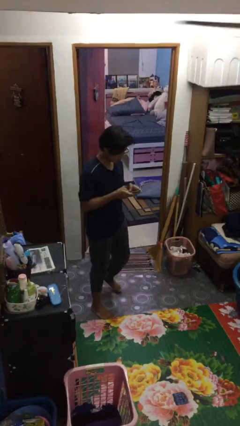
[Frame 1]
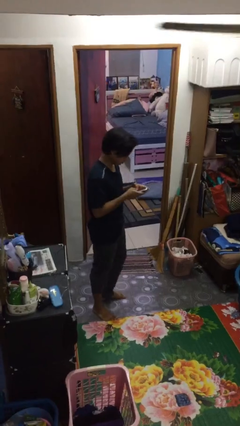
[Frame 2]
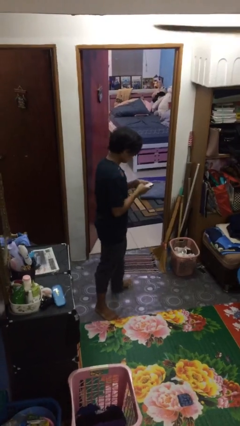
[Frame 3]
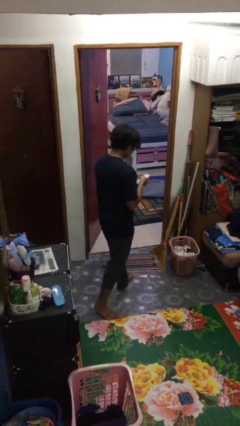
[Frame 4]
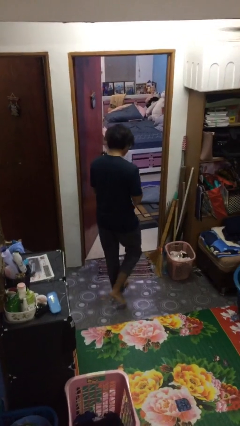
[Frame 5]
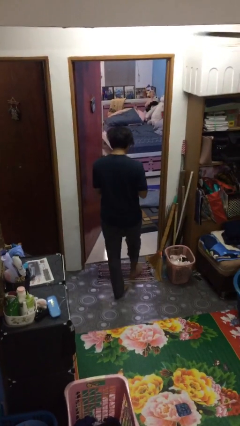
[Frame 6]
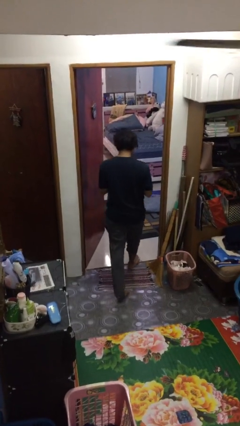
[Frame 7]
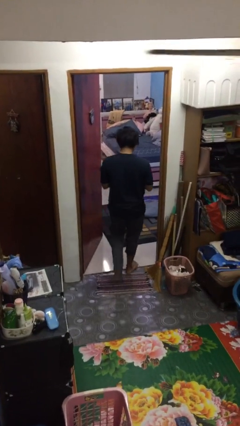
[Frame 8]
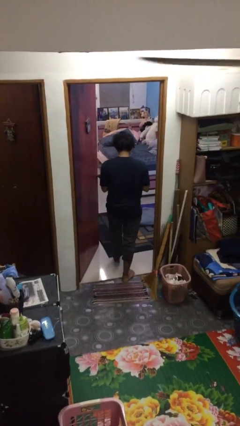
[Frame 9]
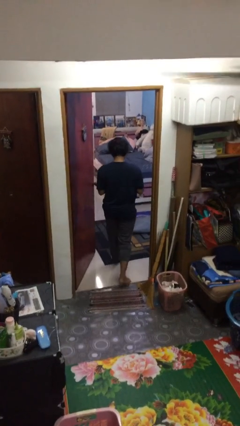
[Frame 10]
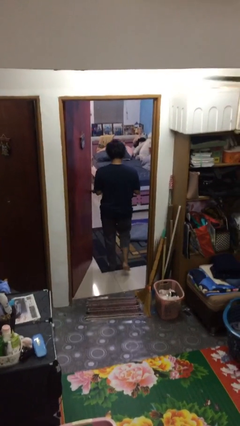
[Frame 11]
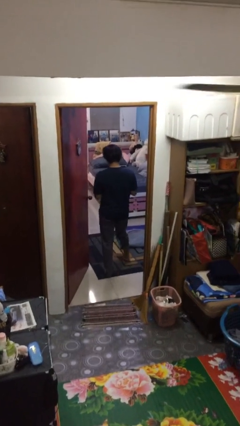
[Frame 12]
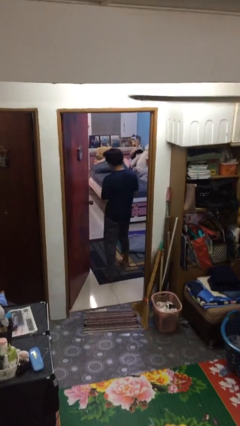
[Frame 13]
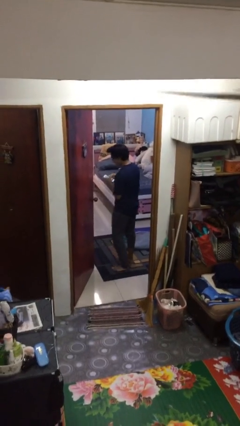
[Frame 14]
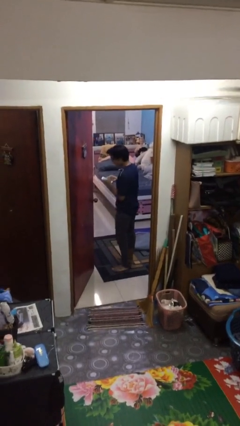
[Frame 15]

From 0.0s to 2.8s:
person exits scene through structure

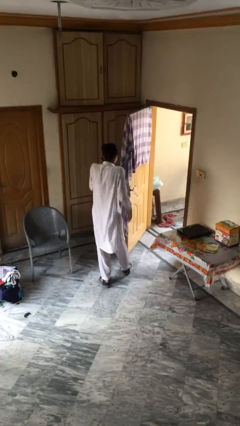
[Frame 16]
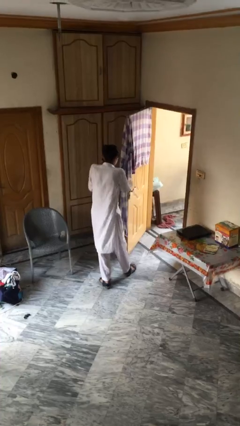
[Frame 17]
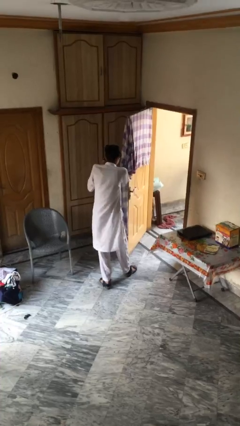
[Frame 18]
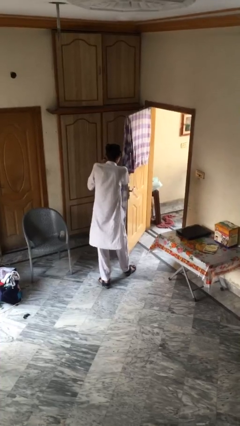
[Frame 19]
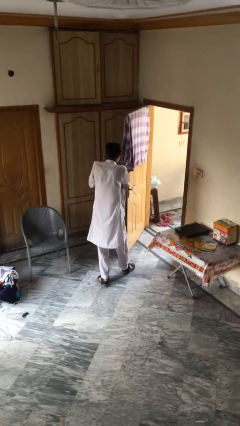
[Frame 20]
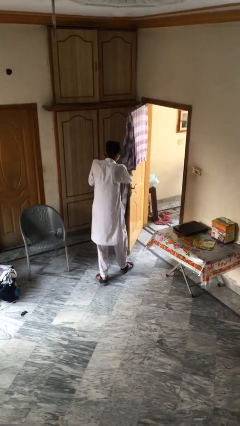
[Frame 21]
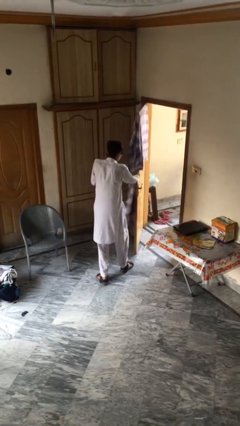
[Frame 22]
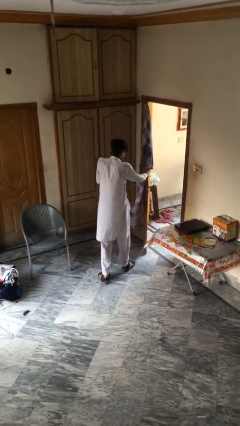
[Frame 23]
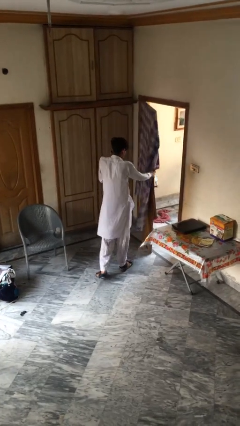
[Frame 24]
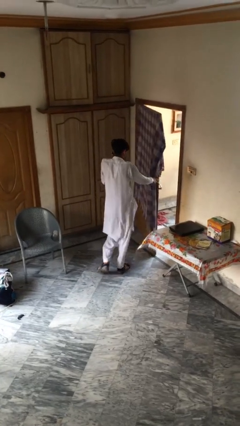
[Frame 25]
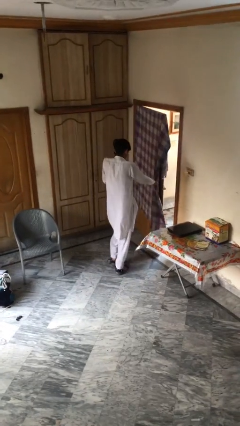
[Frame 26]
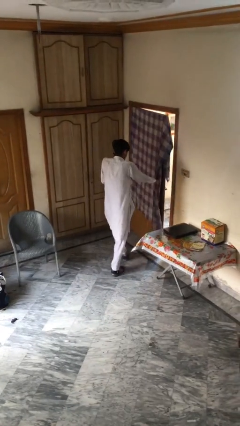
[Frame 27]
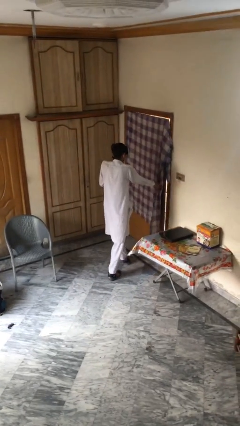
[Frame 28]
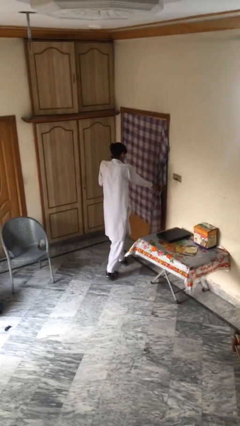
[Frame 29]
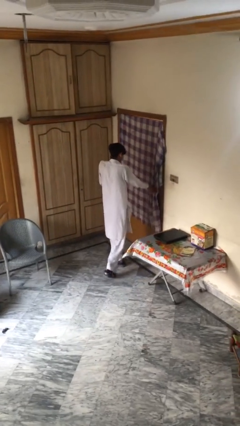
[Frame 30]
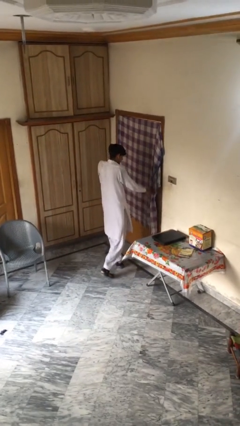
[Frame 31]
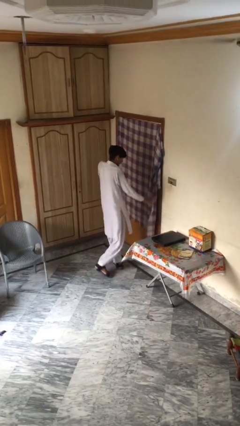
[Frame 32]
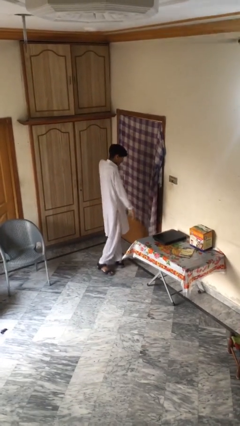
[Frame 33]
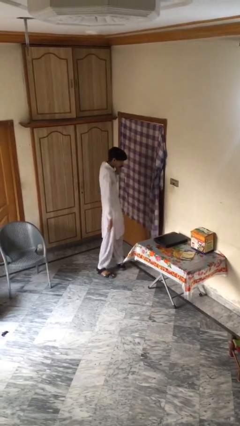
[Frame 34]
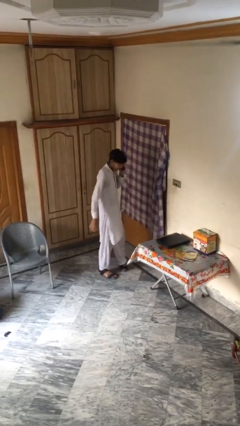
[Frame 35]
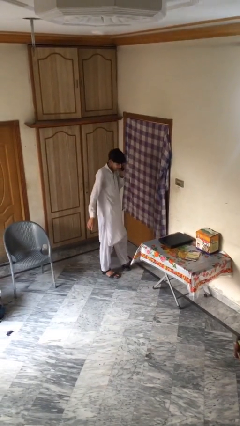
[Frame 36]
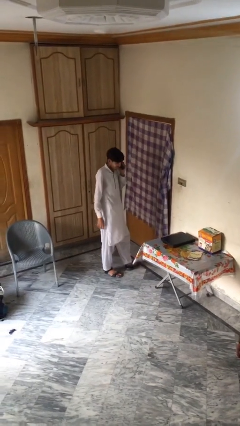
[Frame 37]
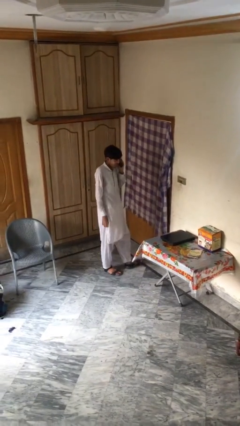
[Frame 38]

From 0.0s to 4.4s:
person closes facility door

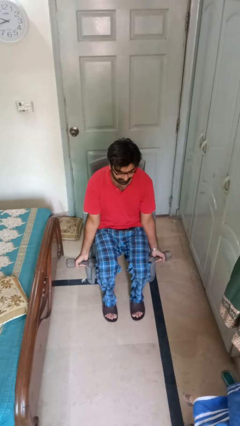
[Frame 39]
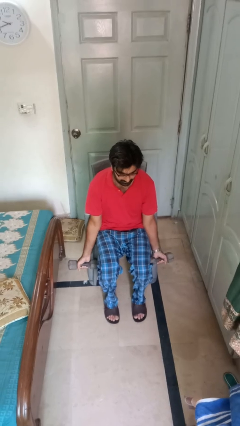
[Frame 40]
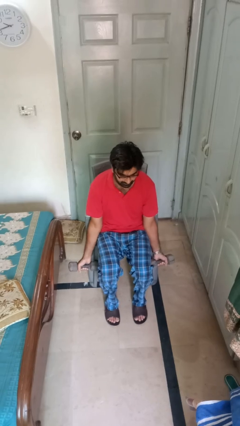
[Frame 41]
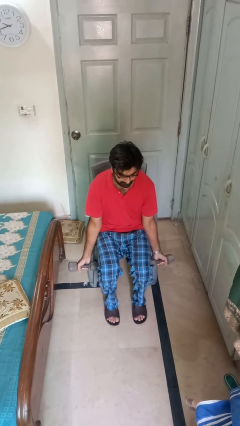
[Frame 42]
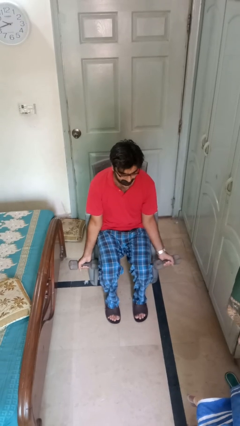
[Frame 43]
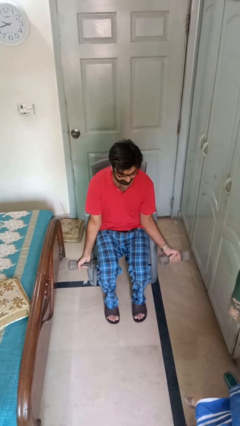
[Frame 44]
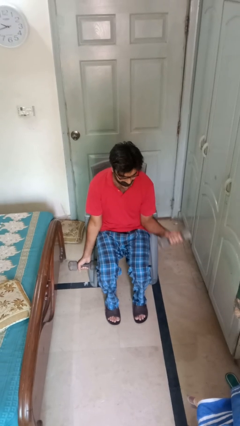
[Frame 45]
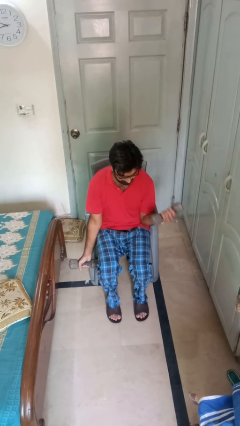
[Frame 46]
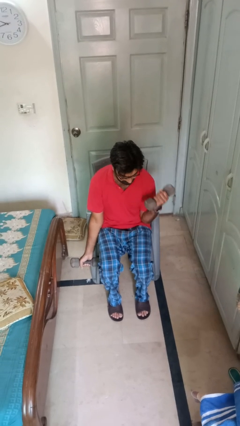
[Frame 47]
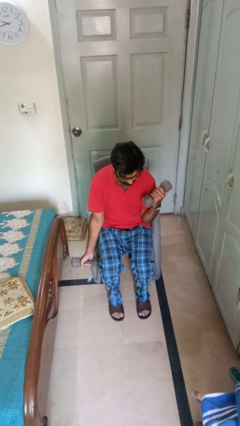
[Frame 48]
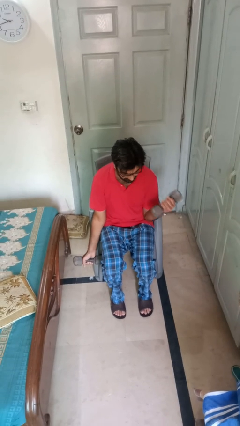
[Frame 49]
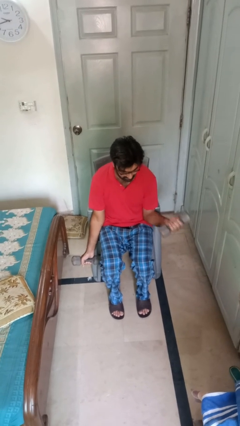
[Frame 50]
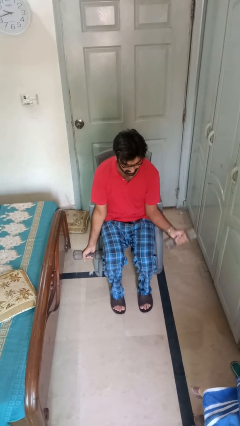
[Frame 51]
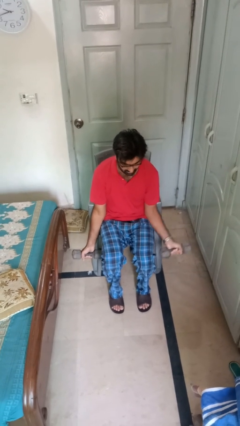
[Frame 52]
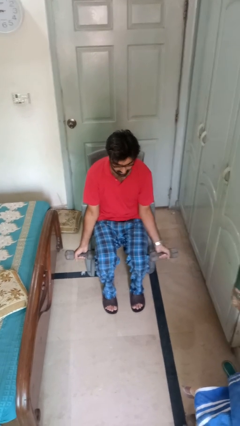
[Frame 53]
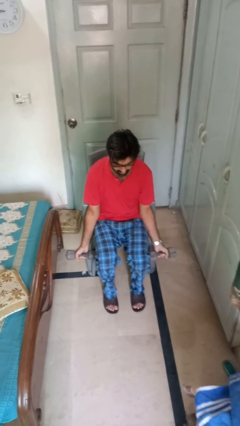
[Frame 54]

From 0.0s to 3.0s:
person lifts dumbbells

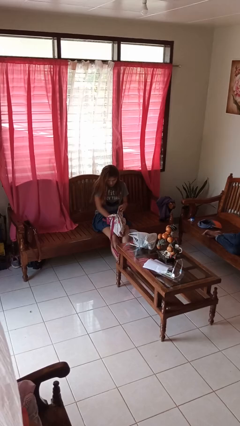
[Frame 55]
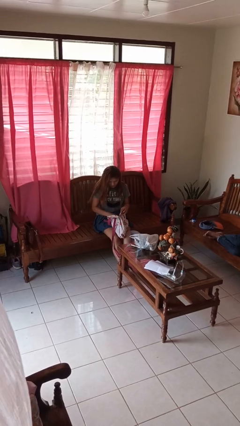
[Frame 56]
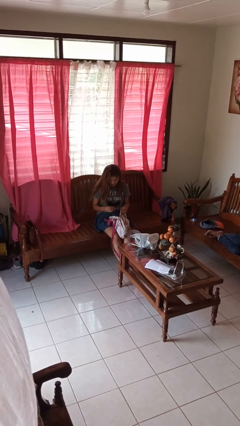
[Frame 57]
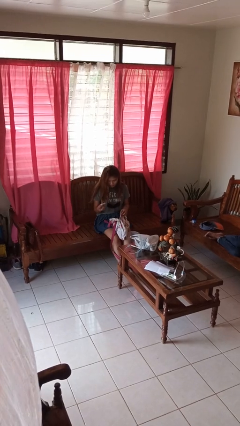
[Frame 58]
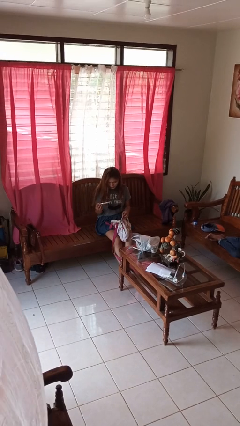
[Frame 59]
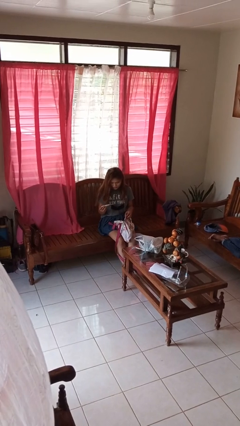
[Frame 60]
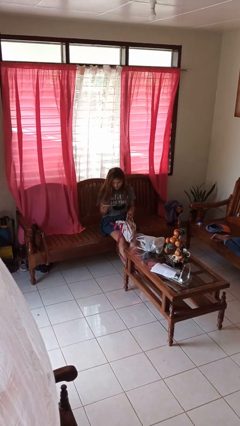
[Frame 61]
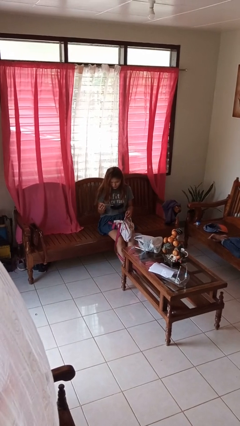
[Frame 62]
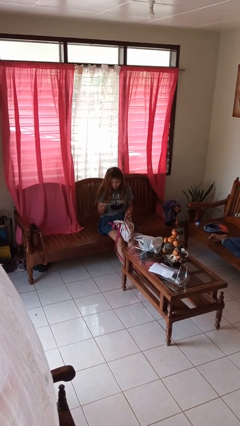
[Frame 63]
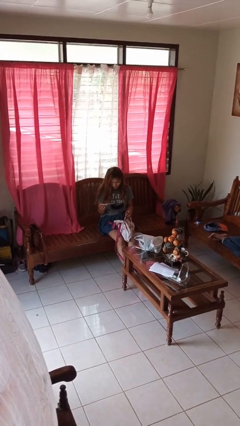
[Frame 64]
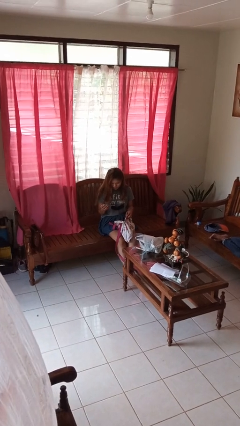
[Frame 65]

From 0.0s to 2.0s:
person takes object from backpack

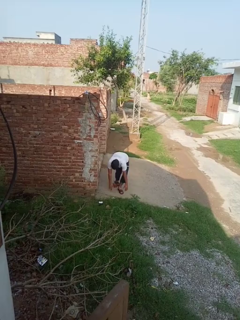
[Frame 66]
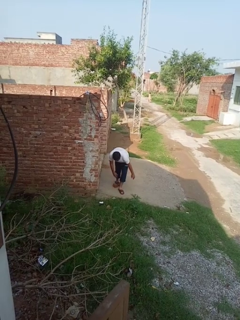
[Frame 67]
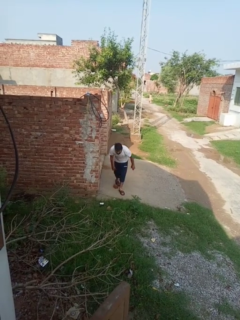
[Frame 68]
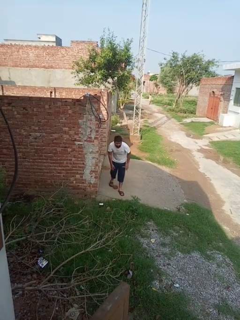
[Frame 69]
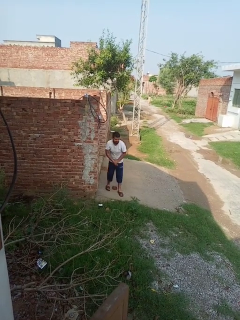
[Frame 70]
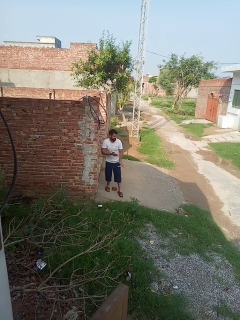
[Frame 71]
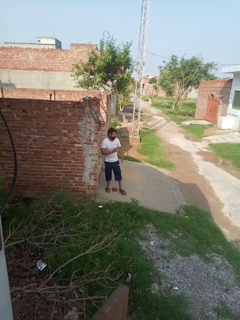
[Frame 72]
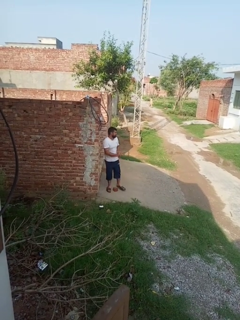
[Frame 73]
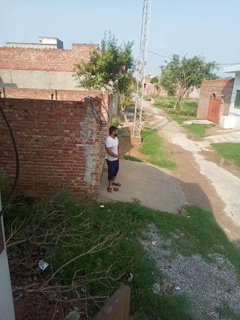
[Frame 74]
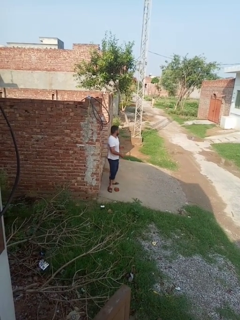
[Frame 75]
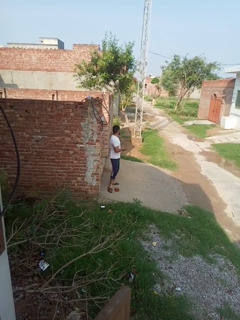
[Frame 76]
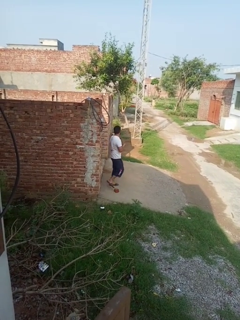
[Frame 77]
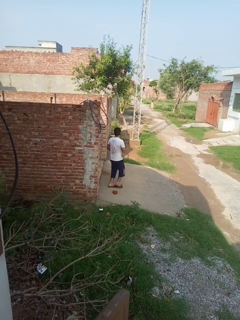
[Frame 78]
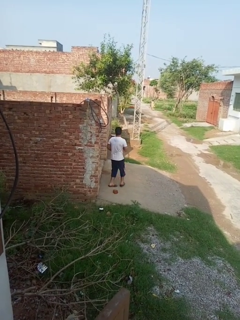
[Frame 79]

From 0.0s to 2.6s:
person stands up from floor

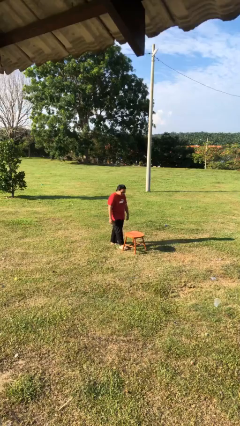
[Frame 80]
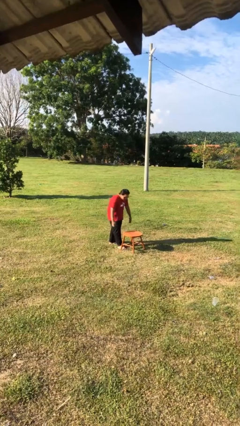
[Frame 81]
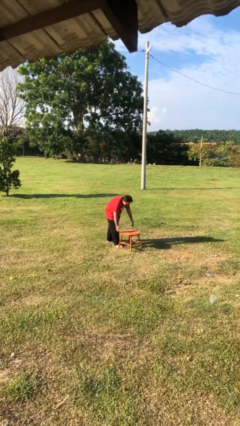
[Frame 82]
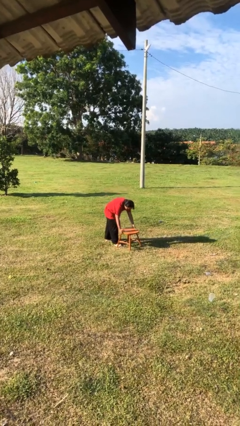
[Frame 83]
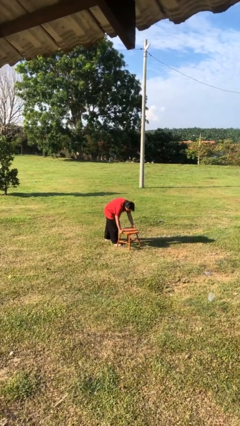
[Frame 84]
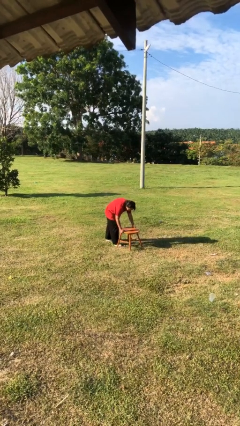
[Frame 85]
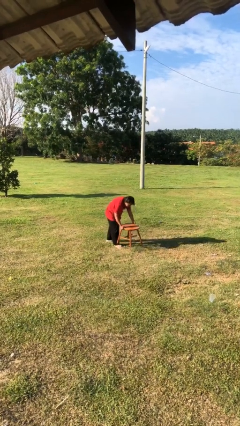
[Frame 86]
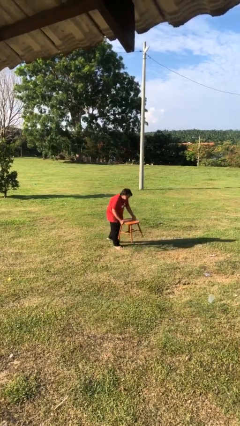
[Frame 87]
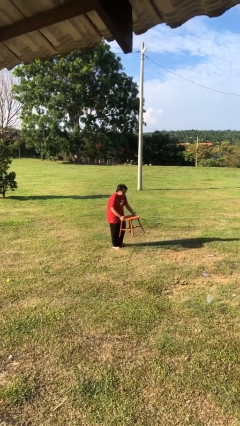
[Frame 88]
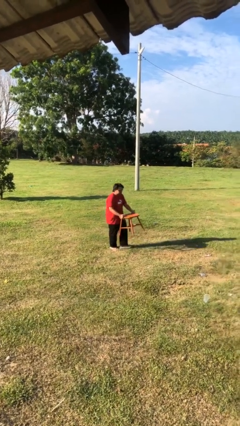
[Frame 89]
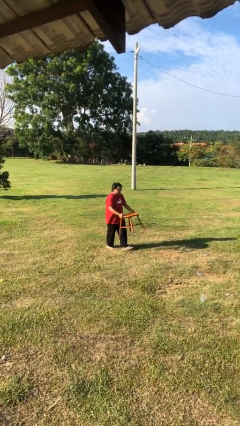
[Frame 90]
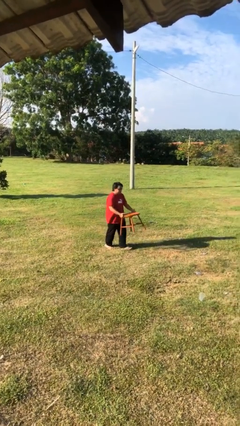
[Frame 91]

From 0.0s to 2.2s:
person picks up object from floor

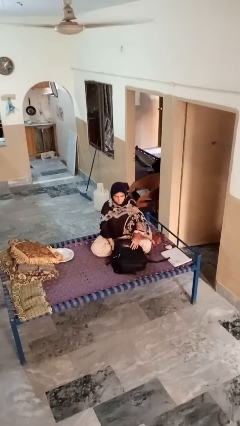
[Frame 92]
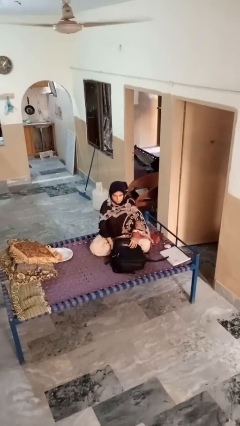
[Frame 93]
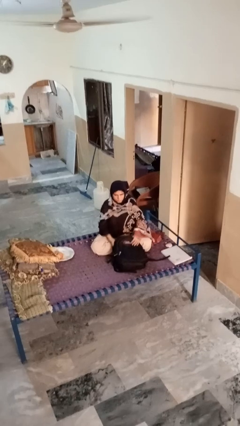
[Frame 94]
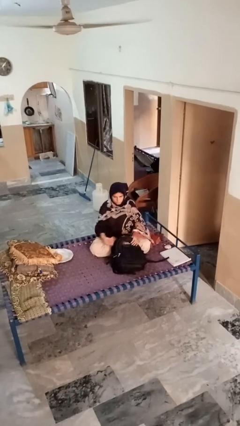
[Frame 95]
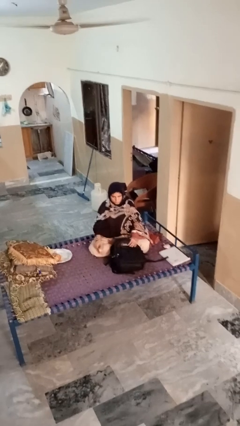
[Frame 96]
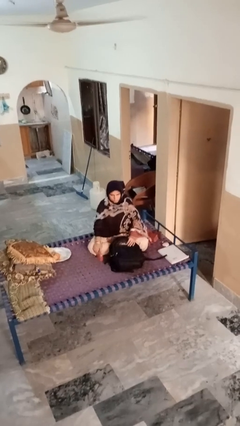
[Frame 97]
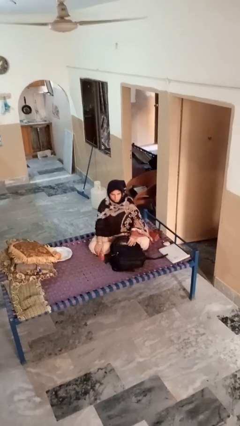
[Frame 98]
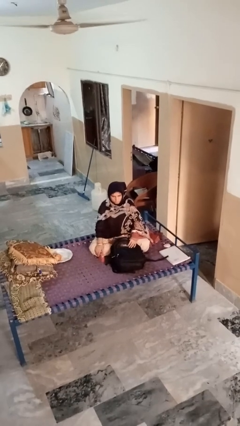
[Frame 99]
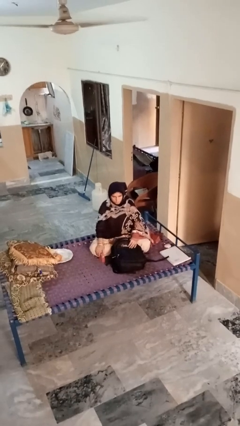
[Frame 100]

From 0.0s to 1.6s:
person takes object from bag
